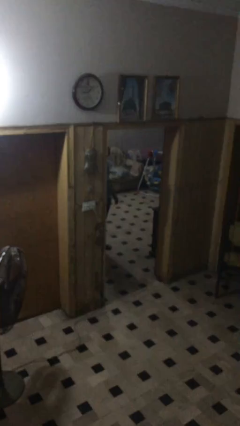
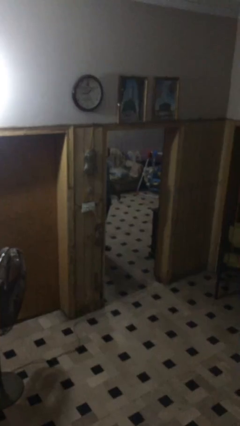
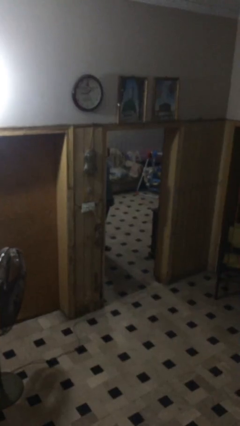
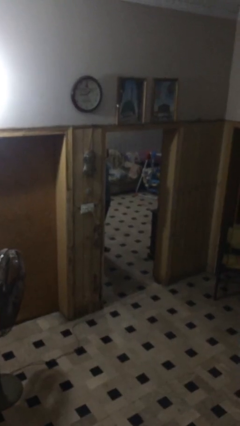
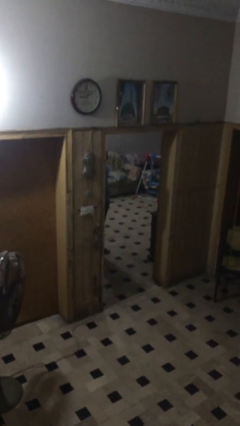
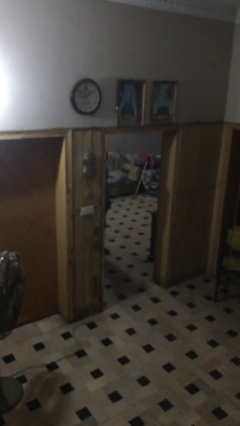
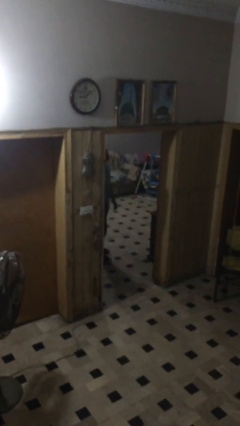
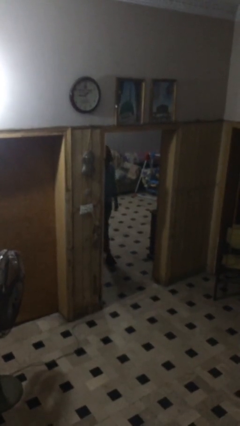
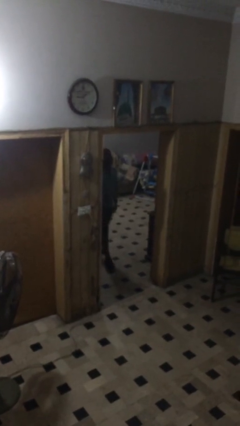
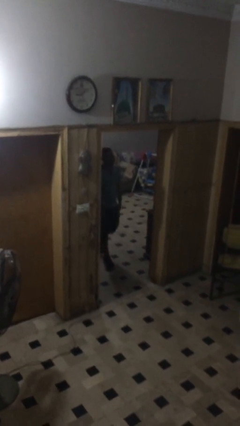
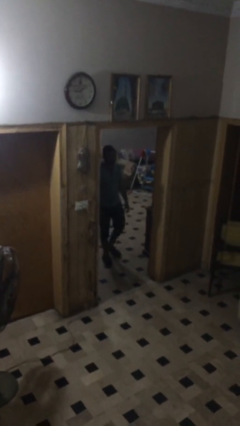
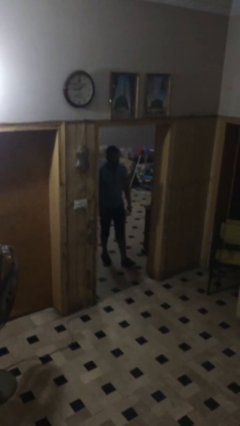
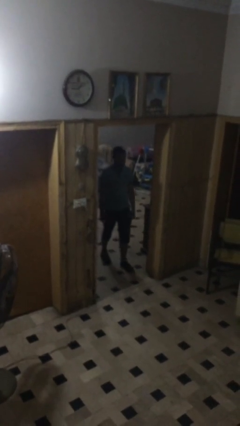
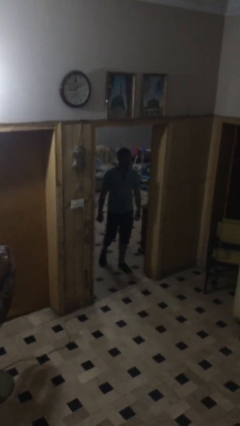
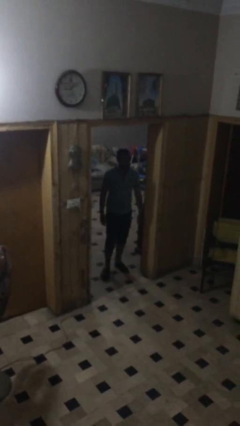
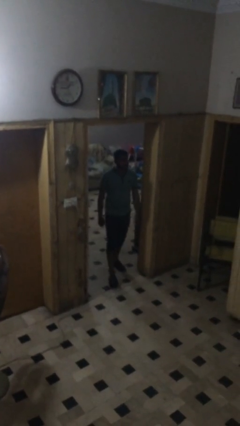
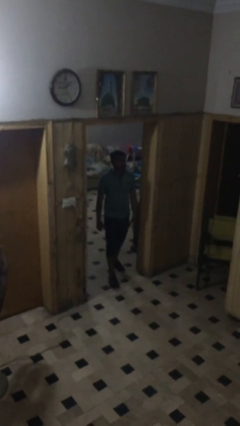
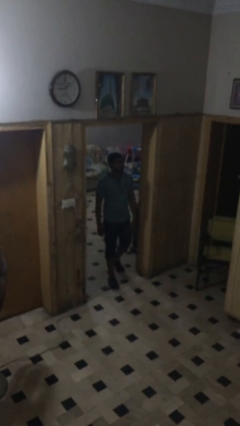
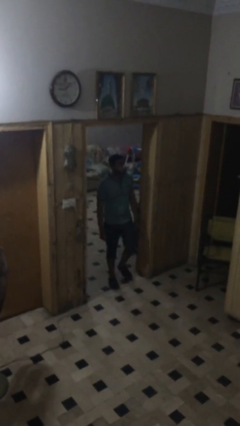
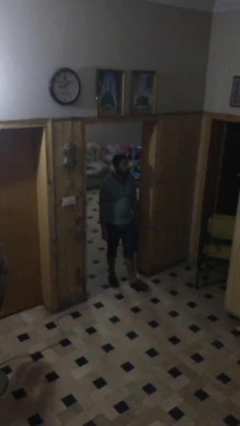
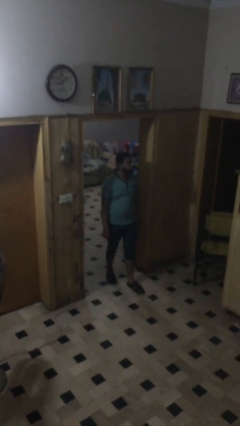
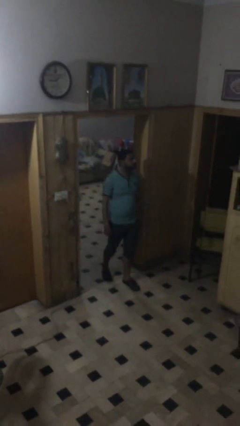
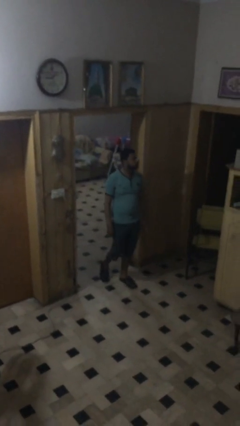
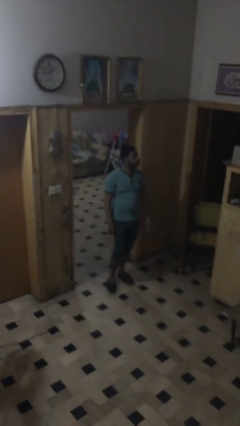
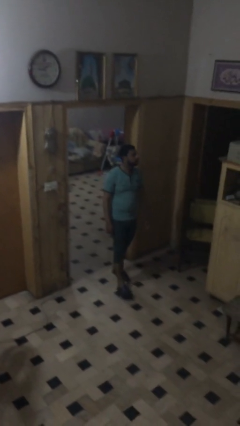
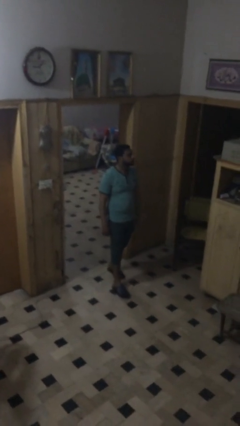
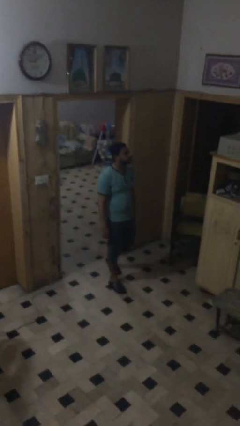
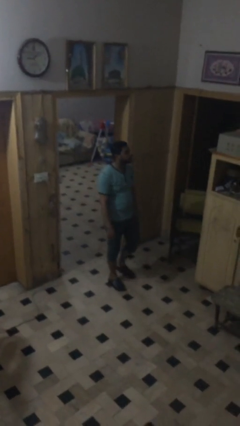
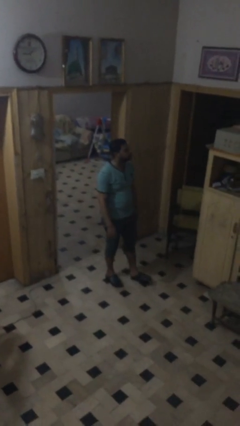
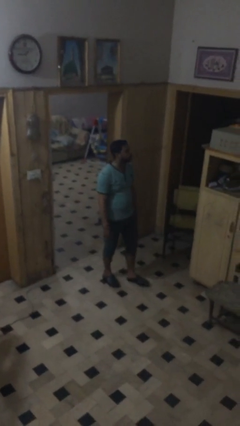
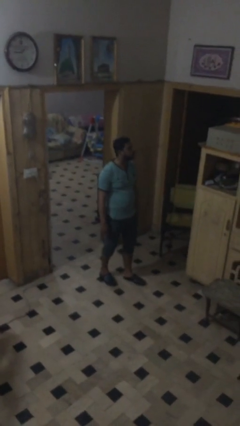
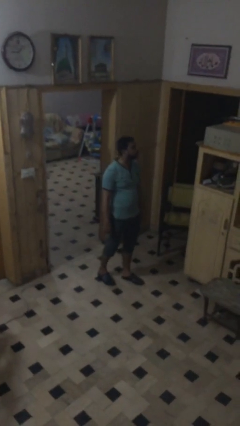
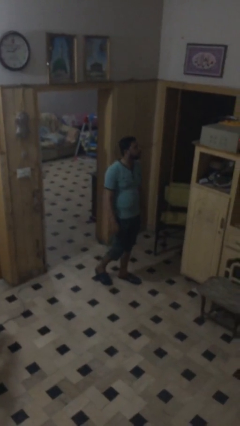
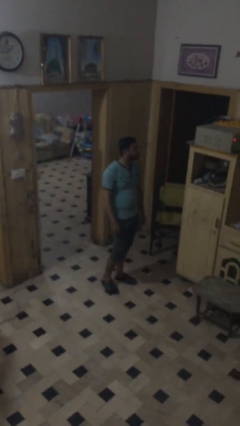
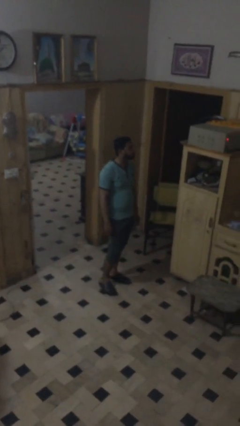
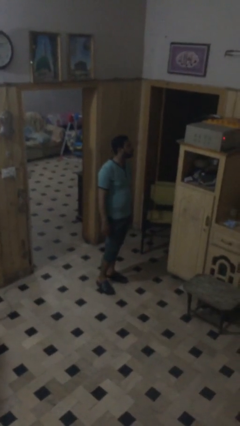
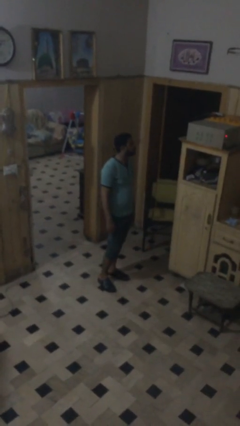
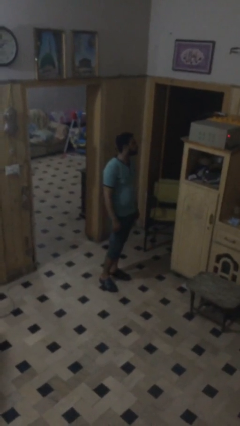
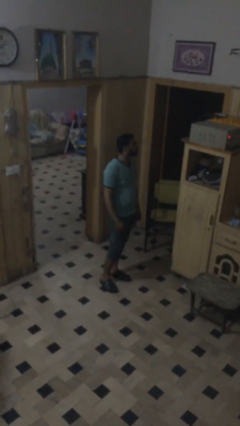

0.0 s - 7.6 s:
person enters scene through structure

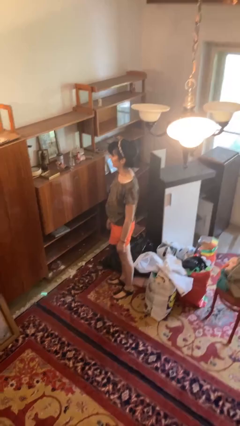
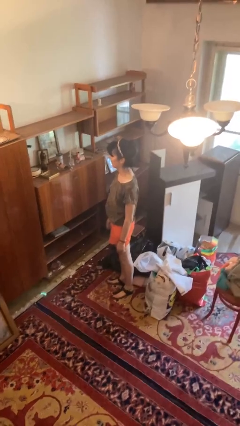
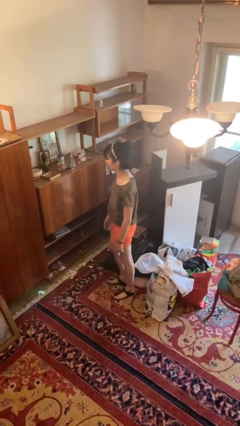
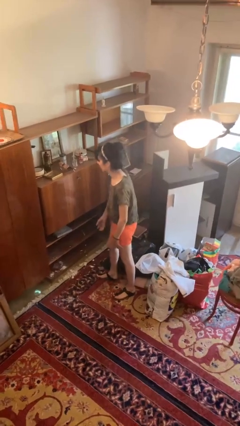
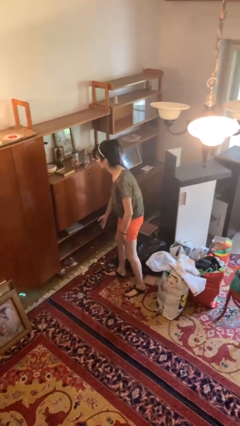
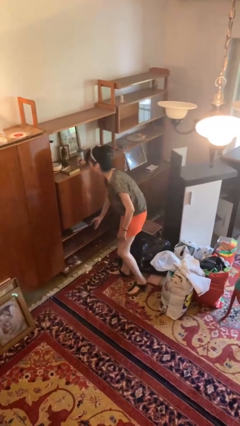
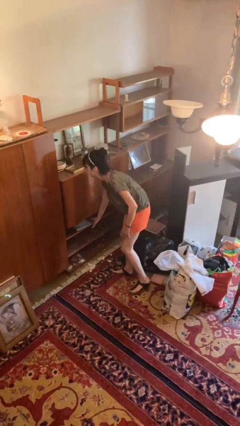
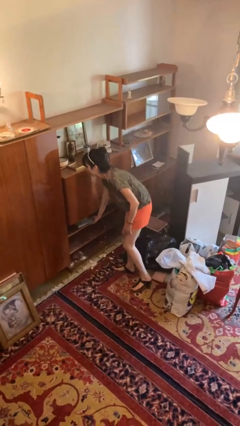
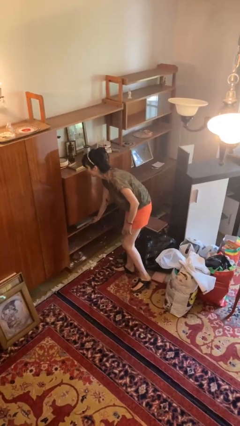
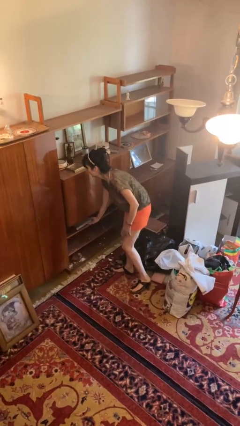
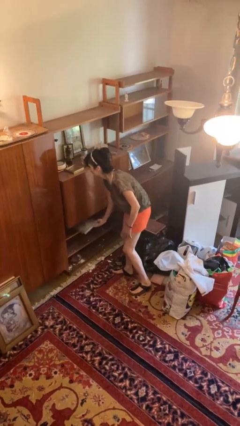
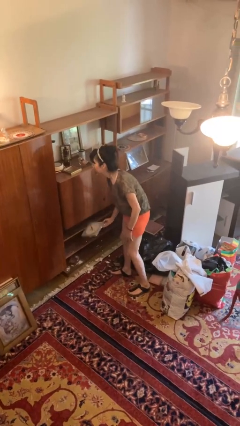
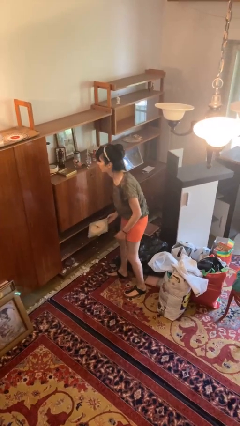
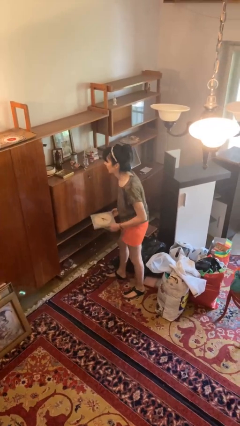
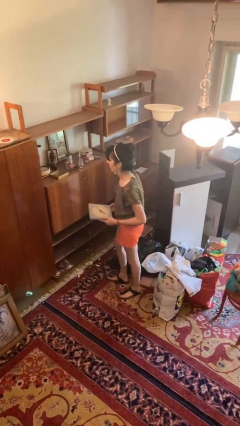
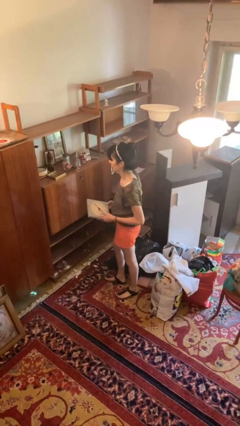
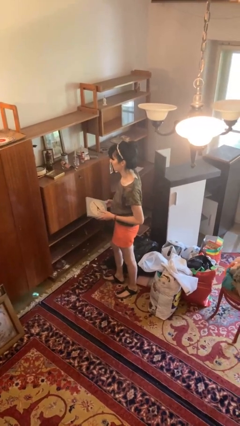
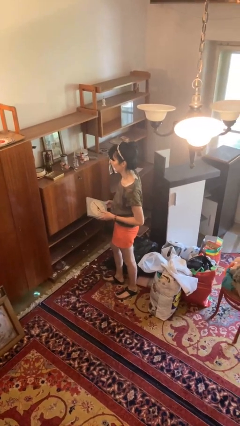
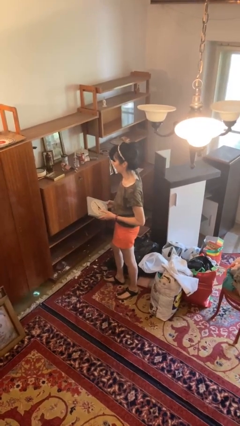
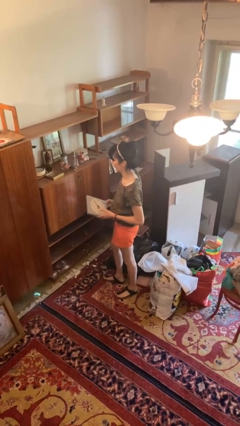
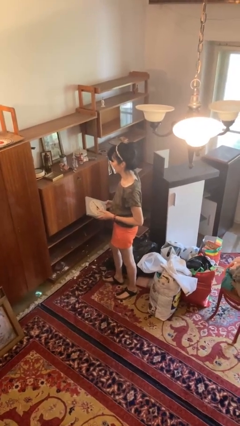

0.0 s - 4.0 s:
person picks up object from cabinet

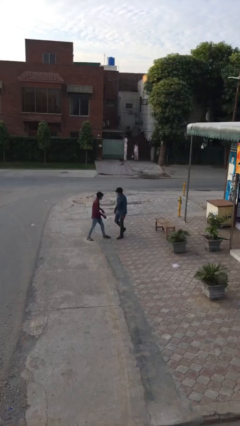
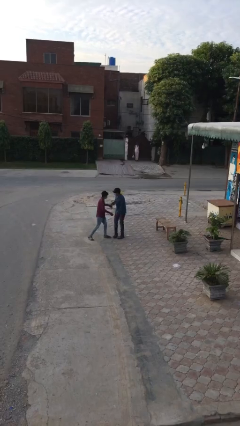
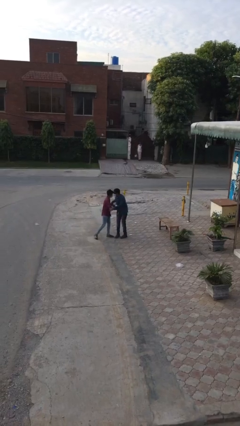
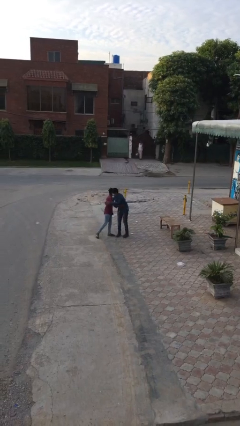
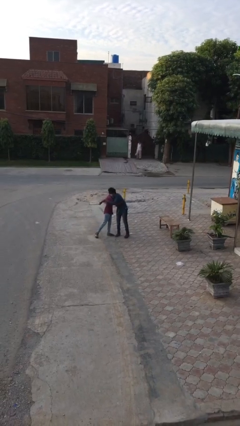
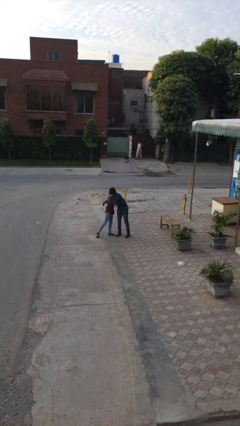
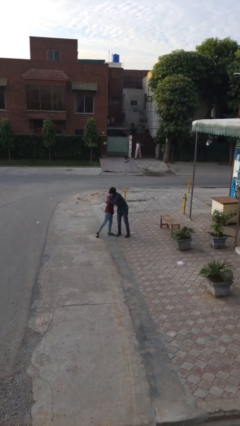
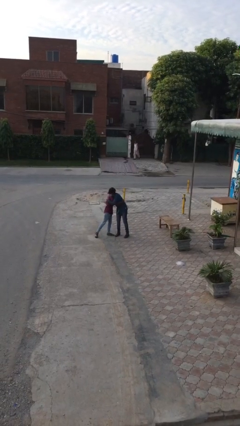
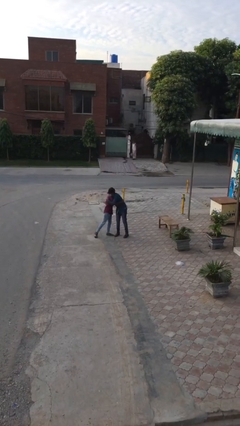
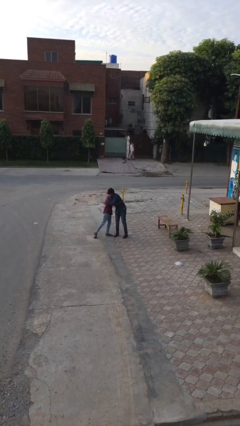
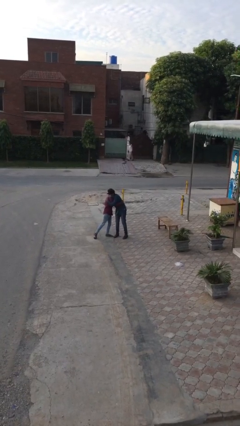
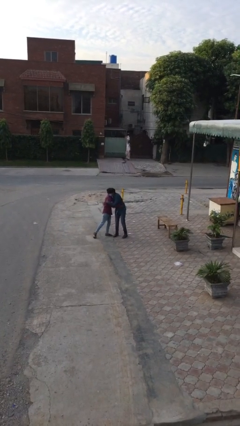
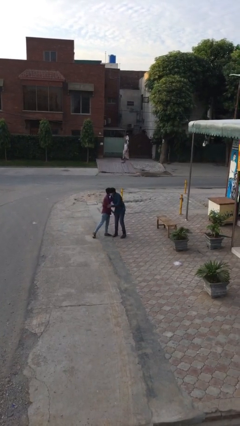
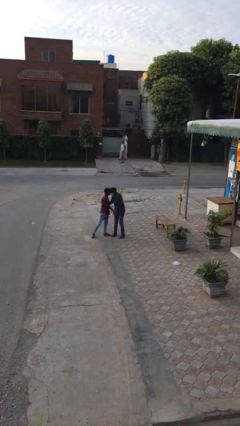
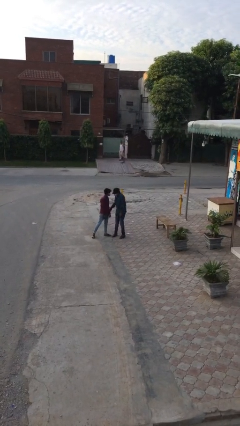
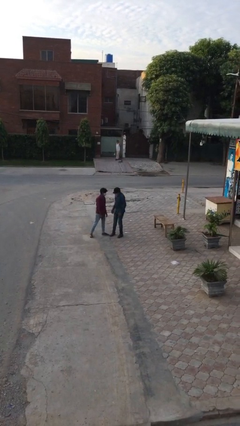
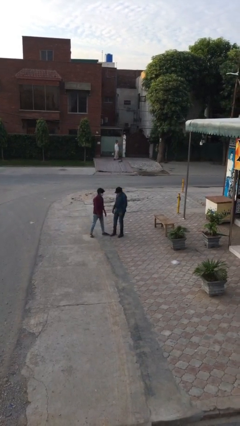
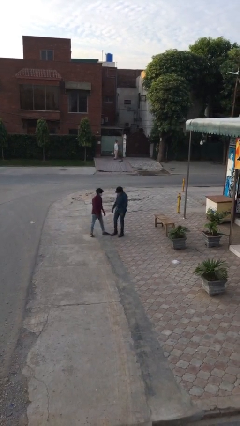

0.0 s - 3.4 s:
person embraces person

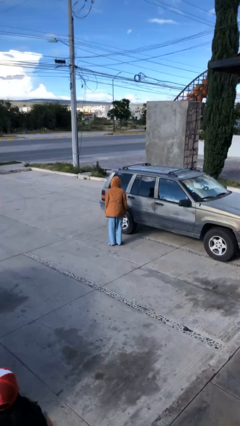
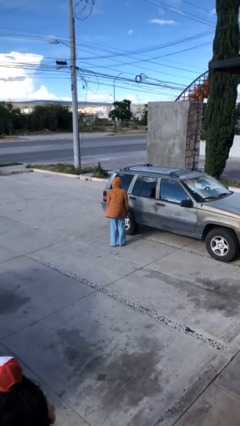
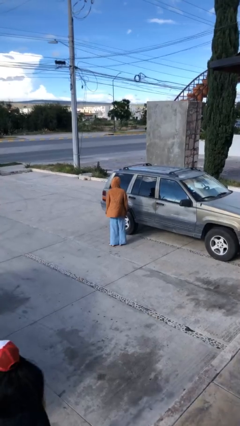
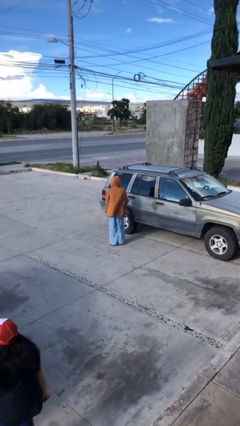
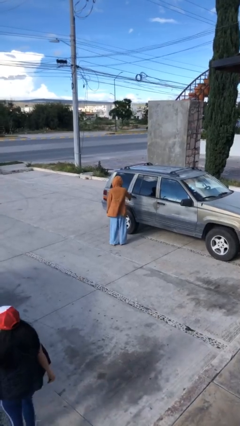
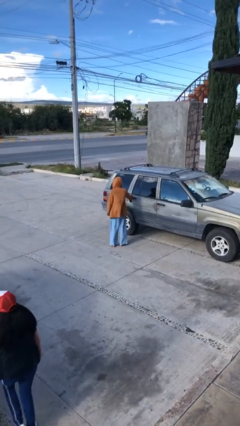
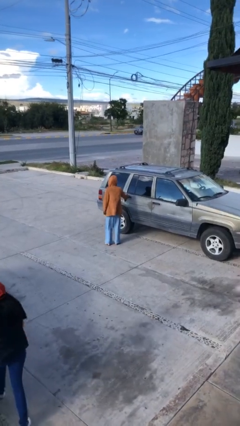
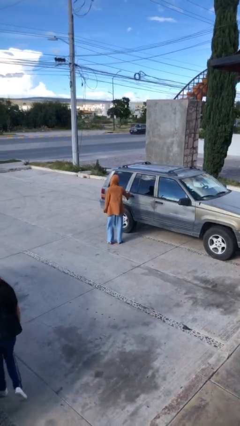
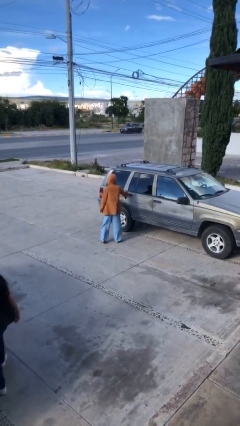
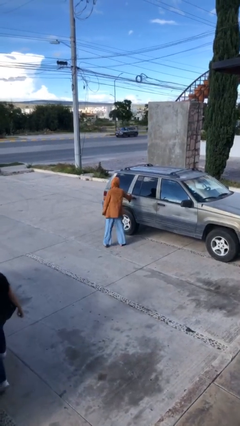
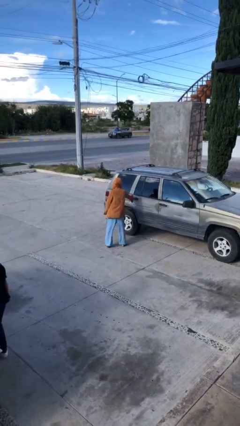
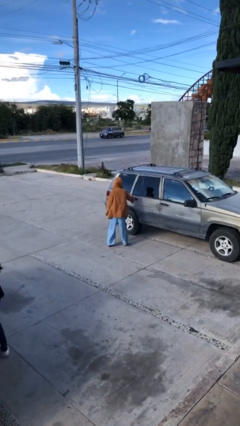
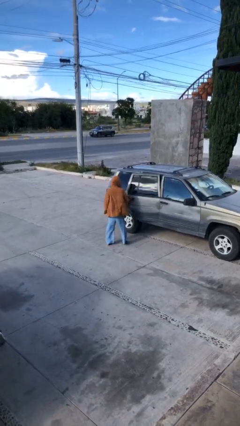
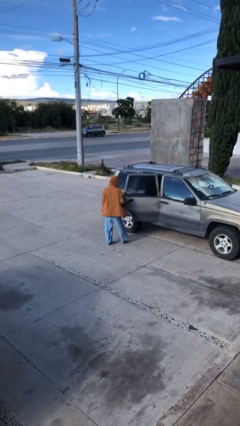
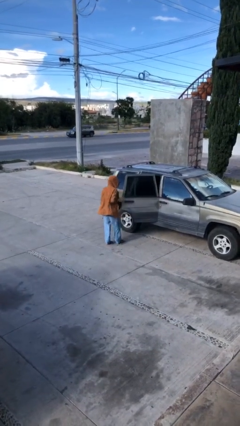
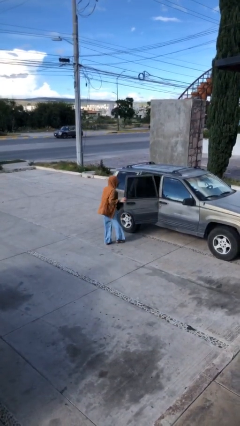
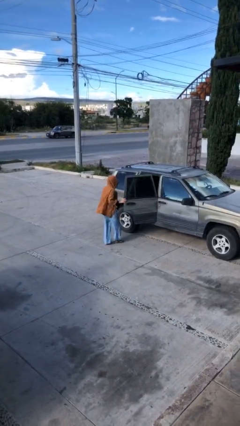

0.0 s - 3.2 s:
person opens car door
